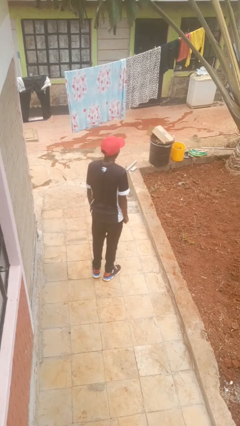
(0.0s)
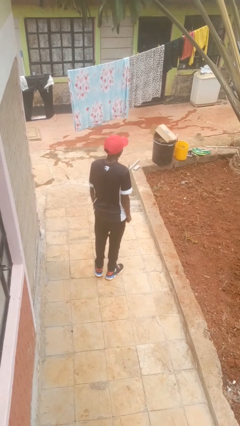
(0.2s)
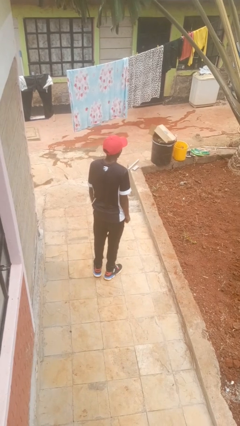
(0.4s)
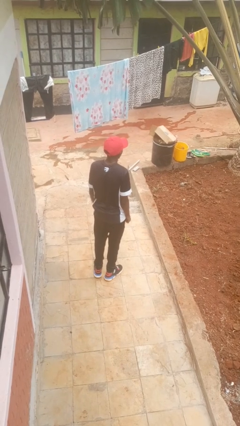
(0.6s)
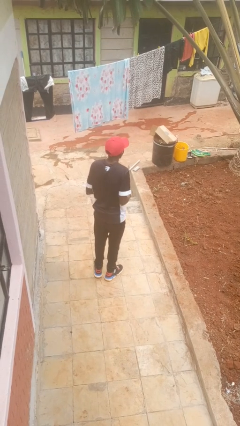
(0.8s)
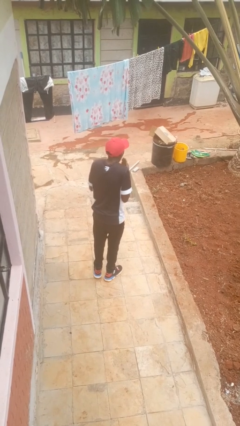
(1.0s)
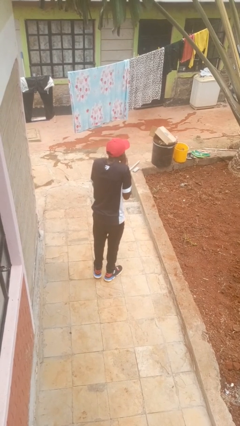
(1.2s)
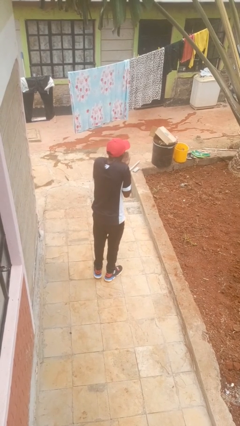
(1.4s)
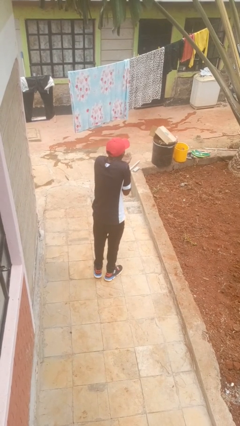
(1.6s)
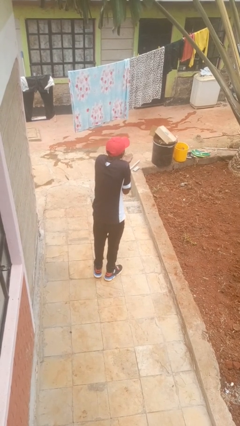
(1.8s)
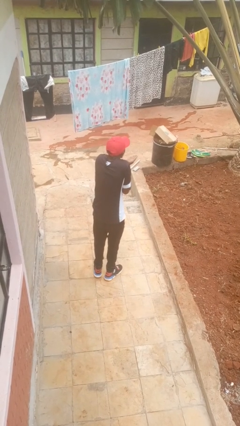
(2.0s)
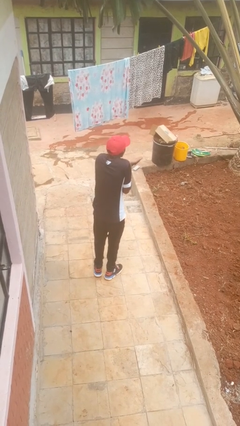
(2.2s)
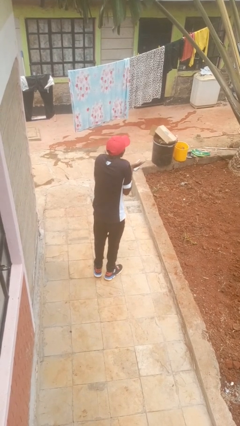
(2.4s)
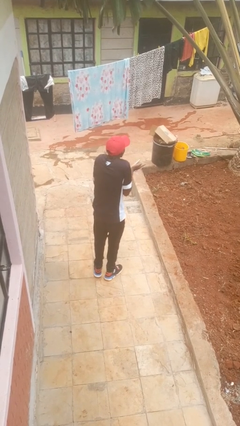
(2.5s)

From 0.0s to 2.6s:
person gestures blow kiss

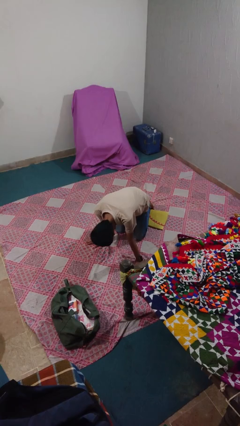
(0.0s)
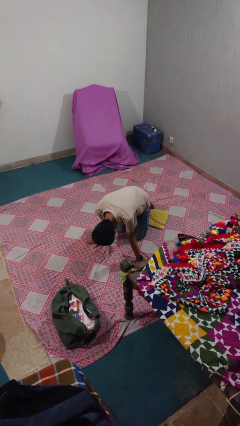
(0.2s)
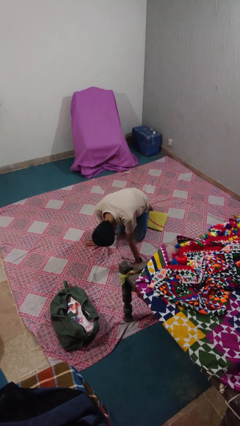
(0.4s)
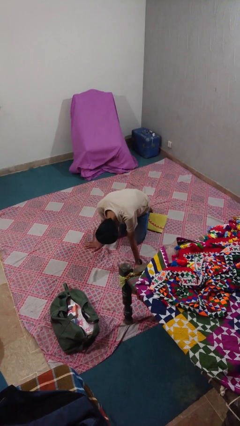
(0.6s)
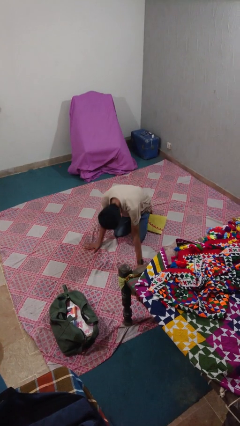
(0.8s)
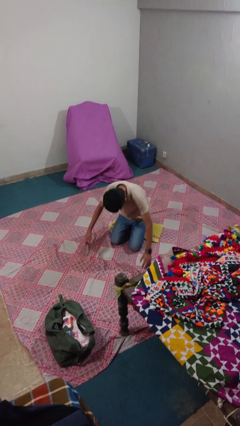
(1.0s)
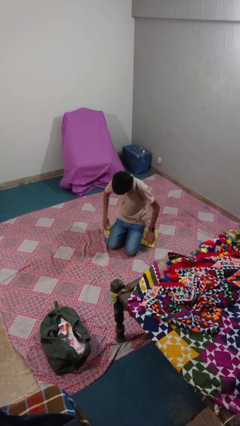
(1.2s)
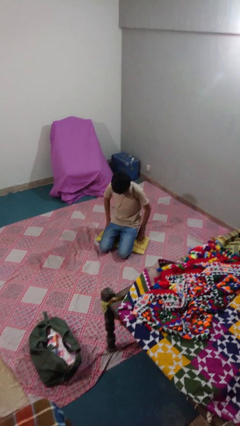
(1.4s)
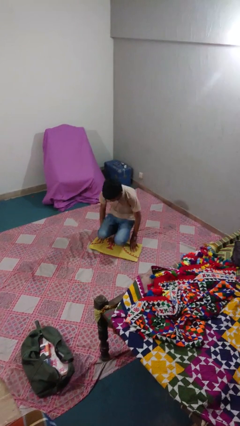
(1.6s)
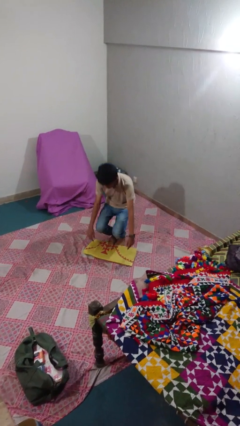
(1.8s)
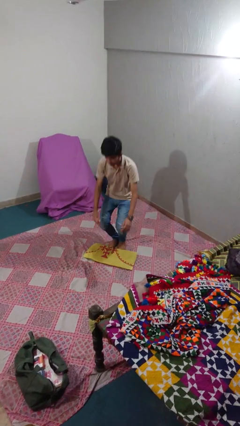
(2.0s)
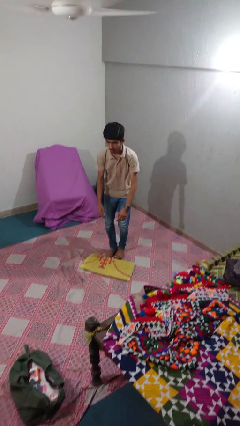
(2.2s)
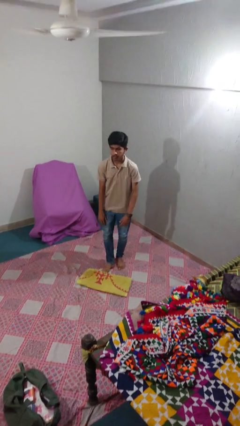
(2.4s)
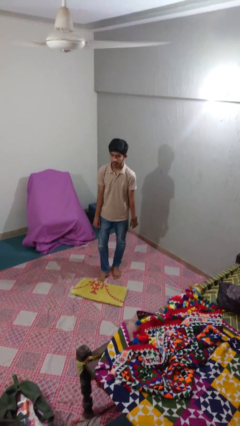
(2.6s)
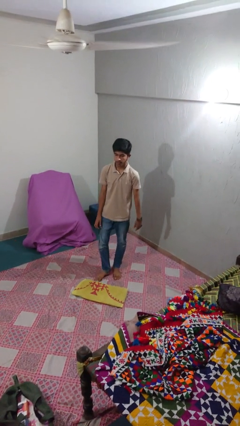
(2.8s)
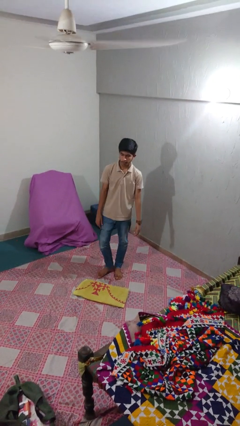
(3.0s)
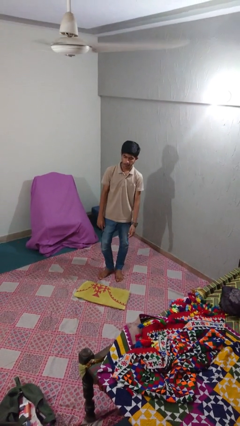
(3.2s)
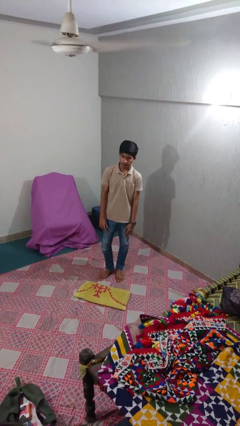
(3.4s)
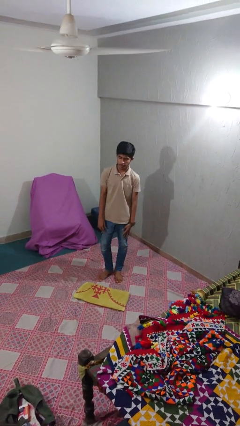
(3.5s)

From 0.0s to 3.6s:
person stands up from floor

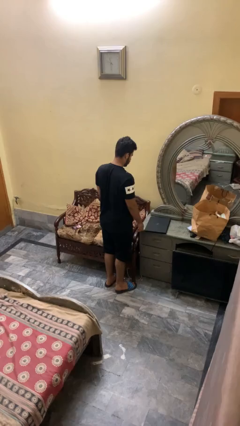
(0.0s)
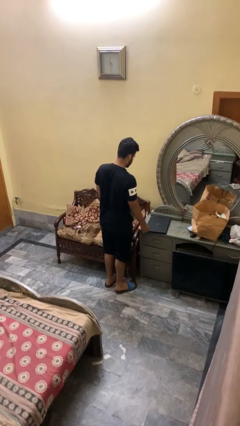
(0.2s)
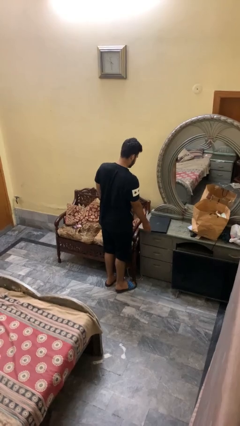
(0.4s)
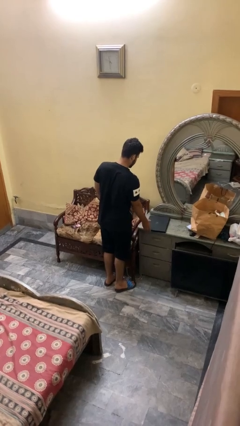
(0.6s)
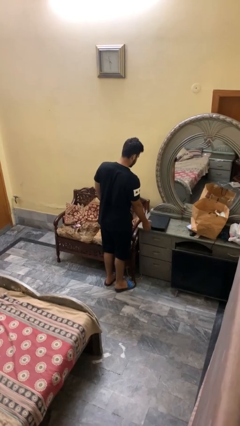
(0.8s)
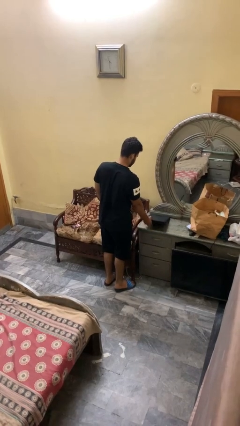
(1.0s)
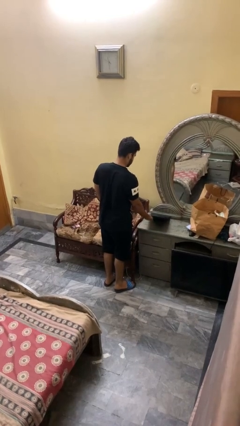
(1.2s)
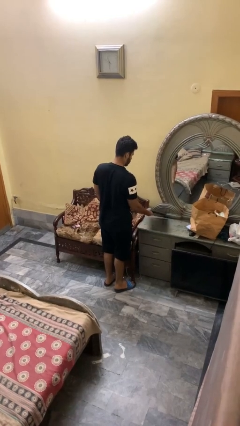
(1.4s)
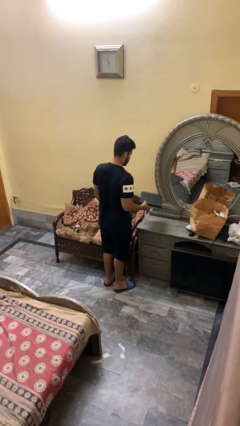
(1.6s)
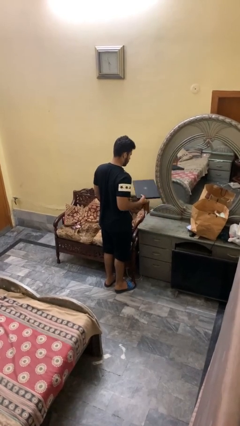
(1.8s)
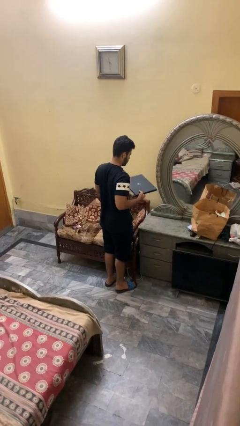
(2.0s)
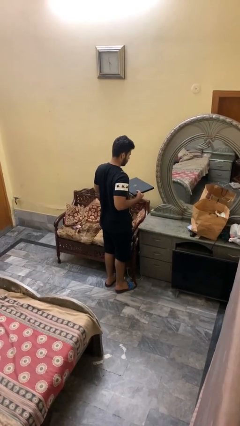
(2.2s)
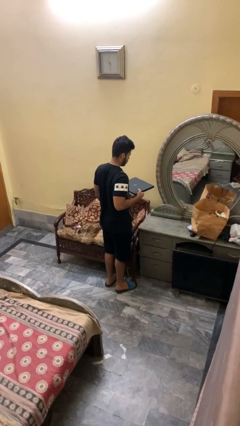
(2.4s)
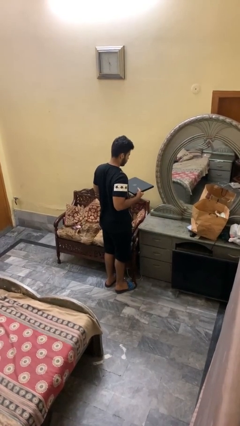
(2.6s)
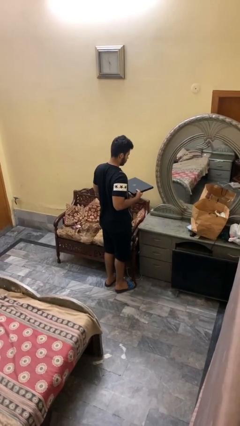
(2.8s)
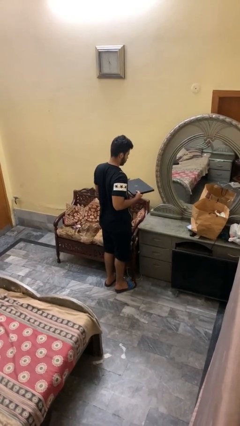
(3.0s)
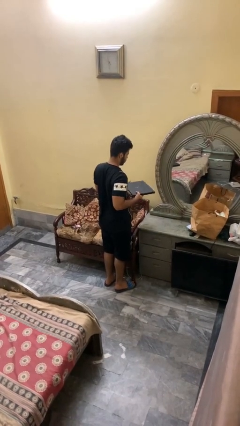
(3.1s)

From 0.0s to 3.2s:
person picks up object from countertop

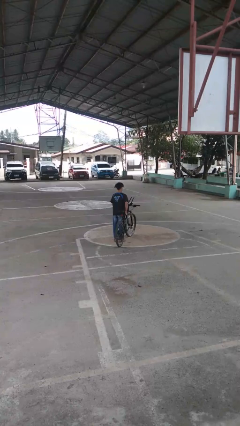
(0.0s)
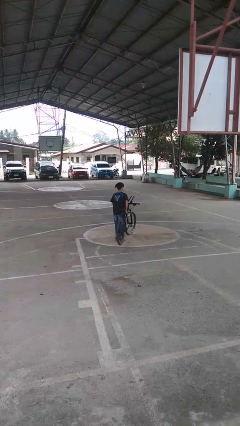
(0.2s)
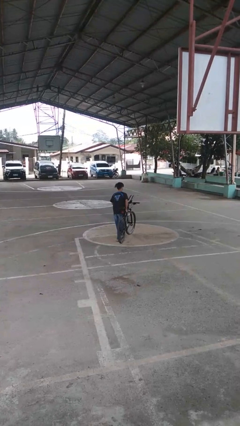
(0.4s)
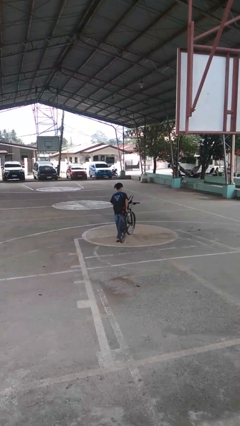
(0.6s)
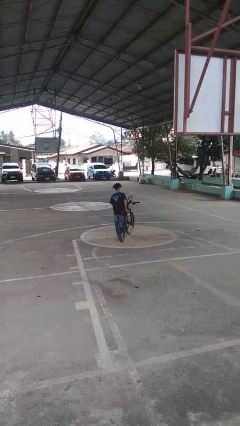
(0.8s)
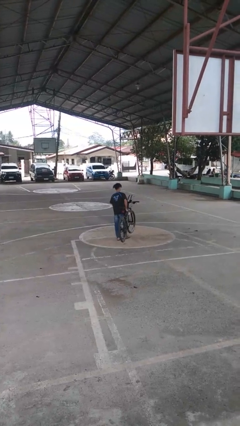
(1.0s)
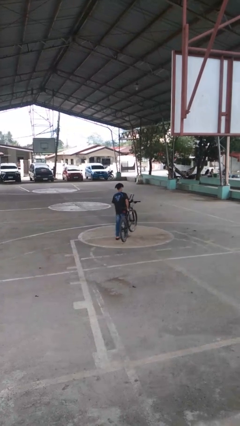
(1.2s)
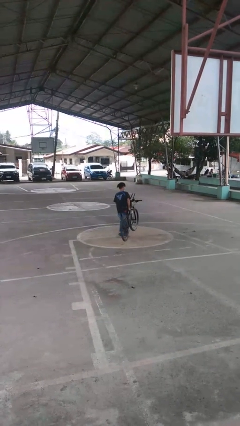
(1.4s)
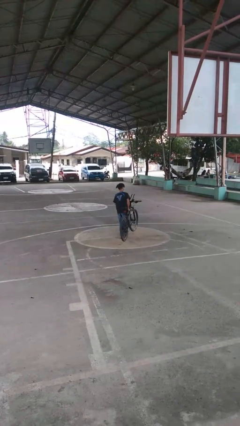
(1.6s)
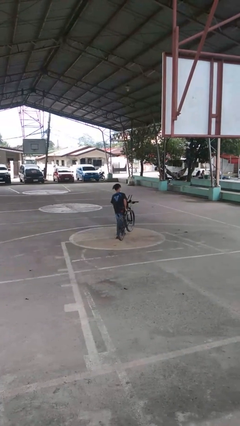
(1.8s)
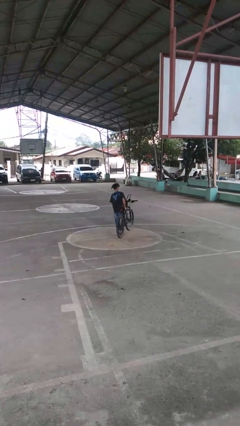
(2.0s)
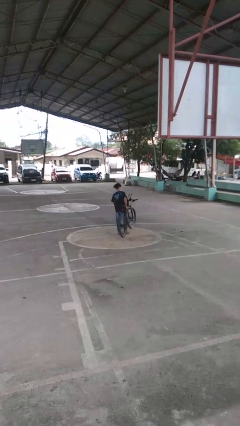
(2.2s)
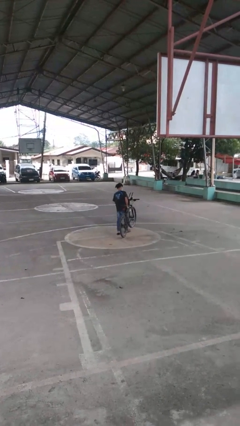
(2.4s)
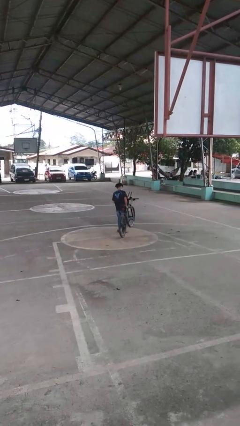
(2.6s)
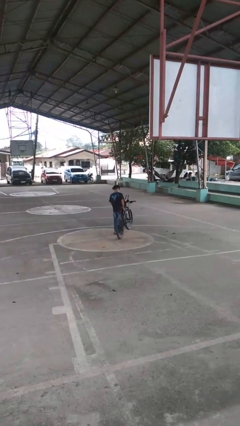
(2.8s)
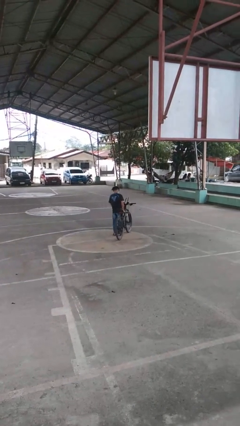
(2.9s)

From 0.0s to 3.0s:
person carries bicycle

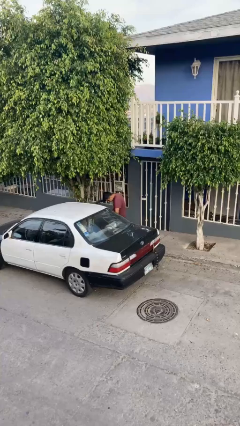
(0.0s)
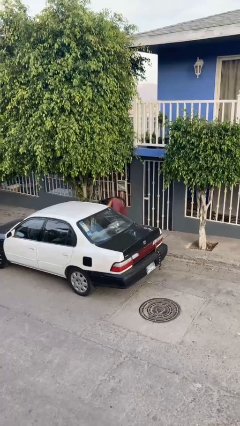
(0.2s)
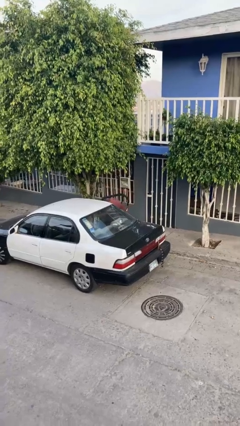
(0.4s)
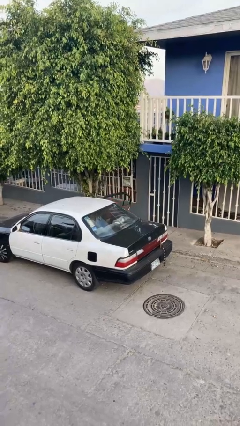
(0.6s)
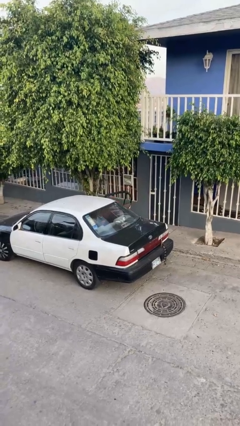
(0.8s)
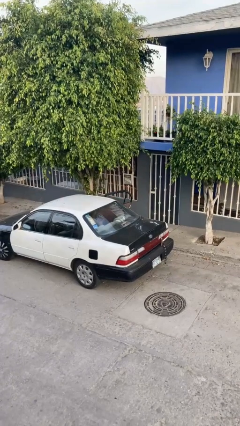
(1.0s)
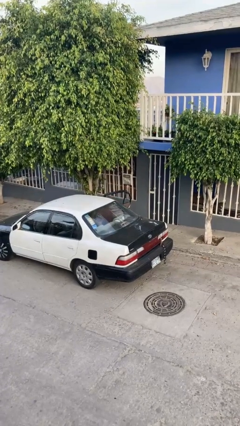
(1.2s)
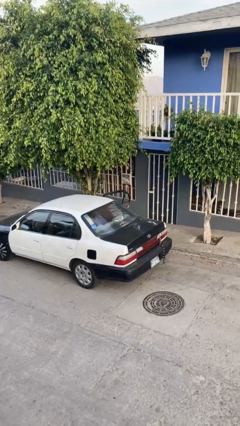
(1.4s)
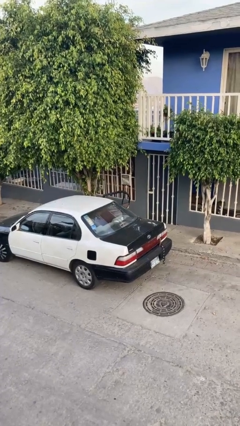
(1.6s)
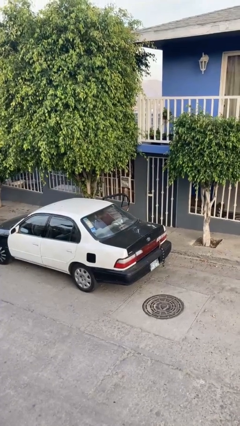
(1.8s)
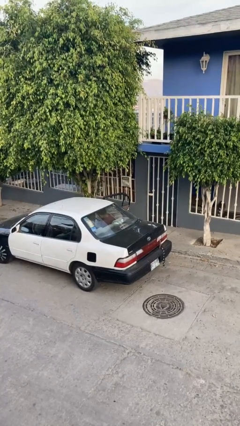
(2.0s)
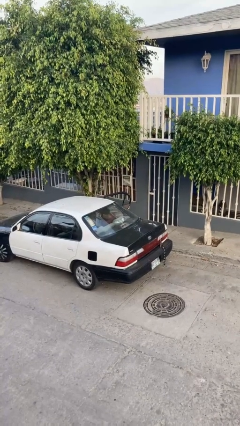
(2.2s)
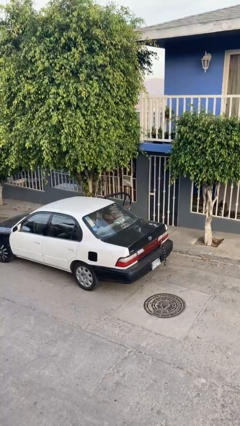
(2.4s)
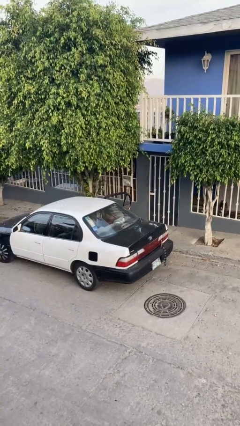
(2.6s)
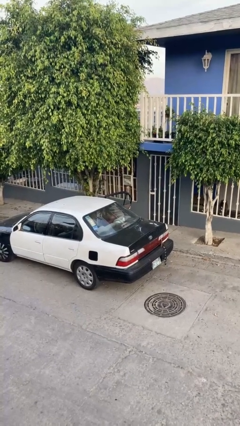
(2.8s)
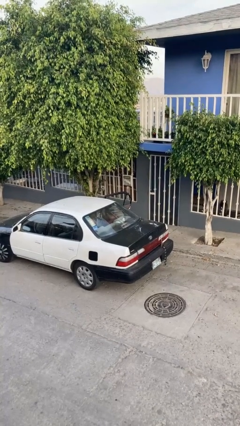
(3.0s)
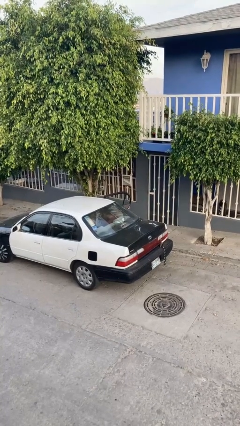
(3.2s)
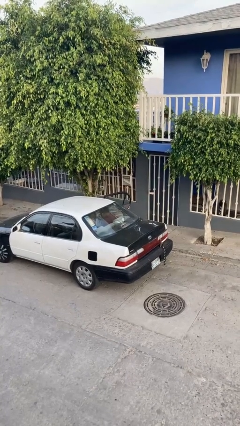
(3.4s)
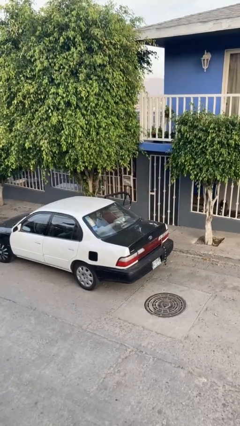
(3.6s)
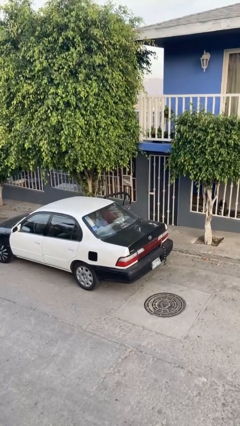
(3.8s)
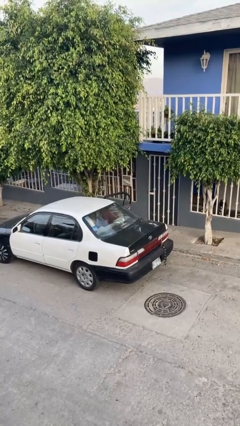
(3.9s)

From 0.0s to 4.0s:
person enters car

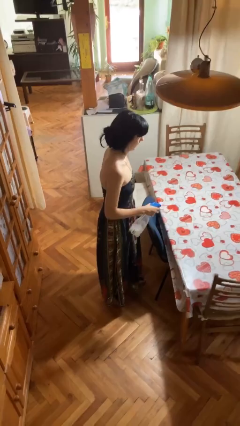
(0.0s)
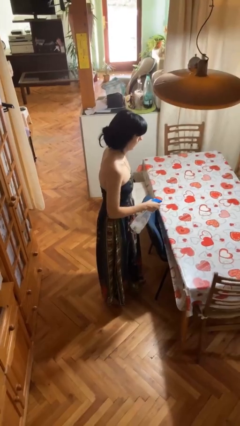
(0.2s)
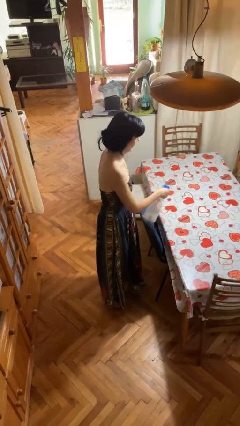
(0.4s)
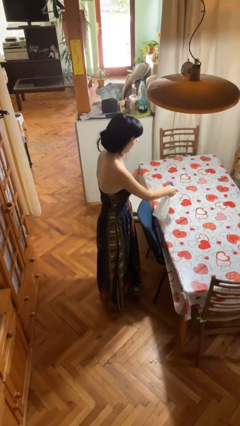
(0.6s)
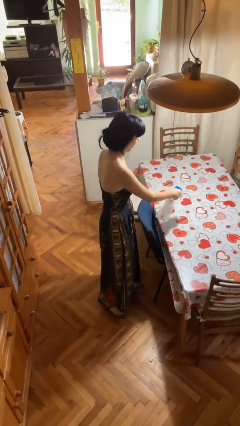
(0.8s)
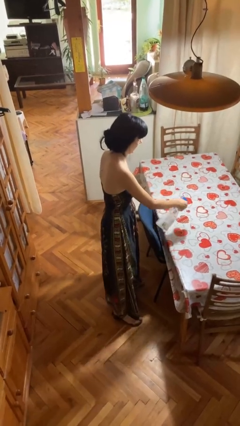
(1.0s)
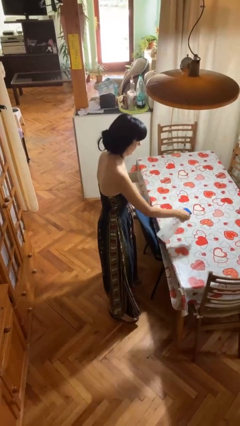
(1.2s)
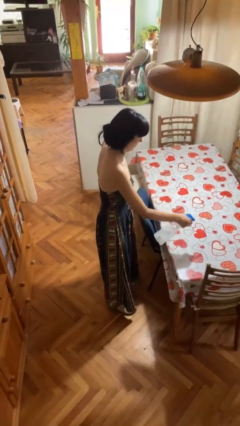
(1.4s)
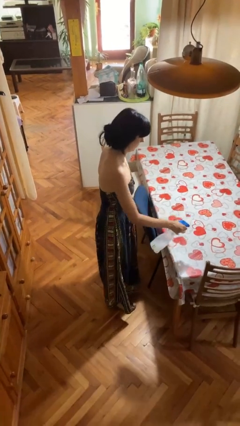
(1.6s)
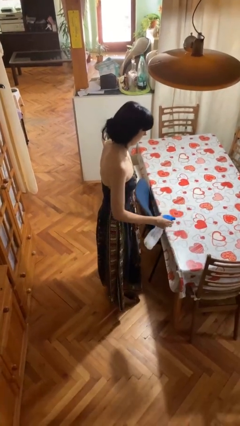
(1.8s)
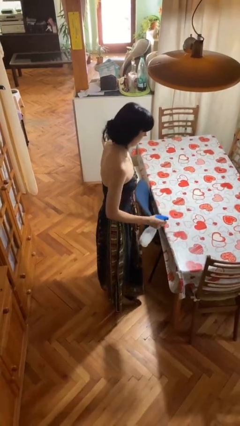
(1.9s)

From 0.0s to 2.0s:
person sprays from bottle
